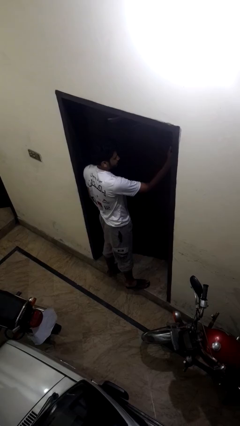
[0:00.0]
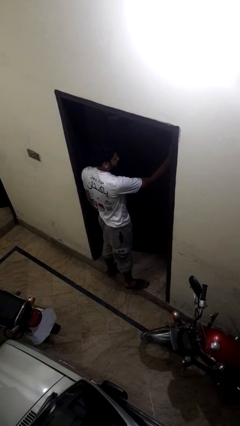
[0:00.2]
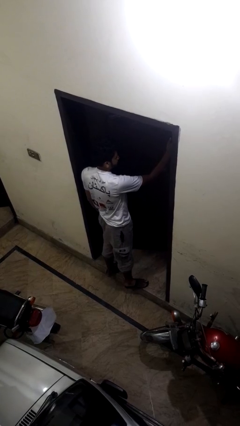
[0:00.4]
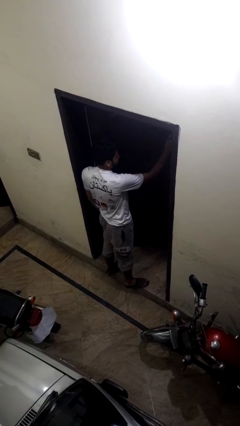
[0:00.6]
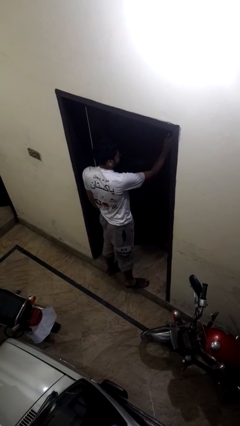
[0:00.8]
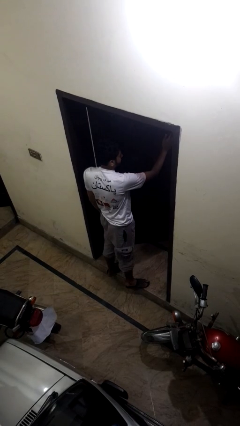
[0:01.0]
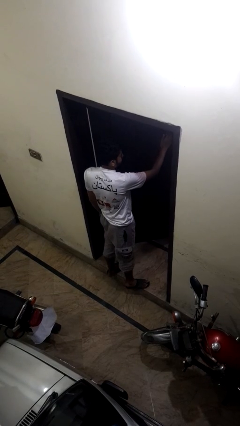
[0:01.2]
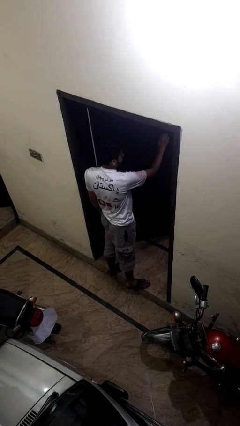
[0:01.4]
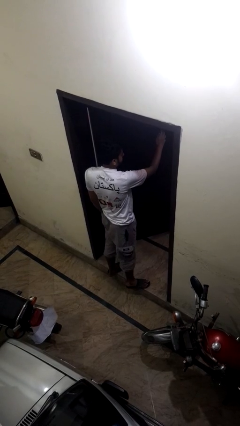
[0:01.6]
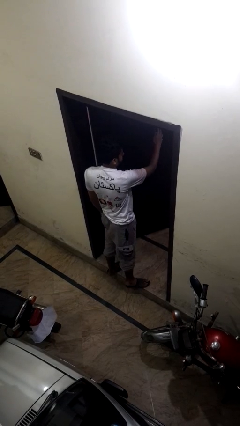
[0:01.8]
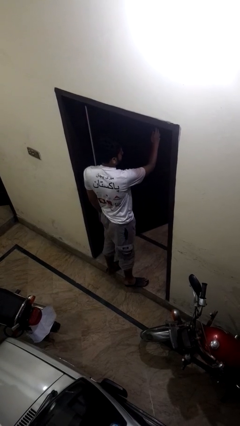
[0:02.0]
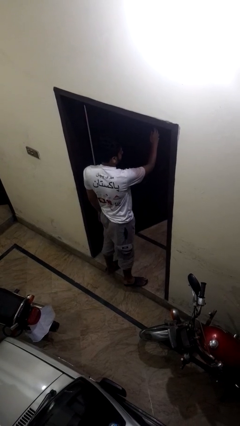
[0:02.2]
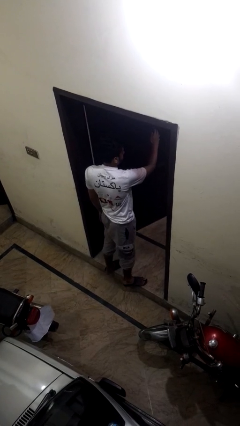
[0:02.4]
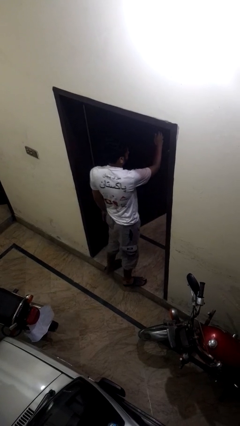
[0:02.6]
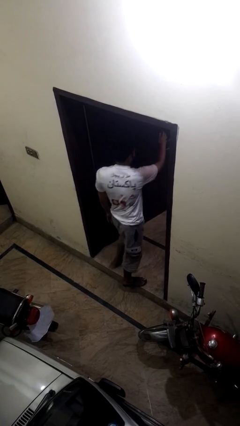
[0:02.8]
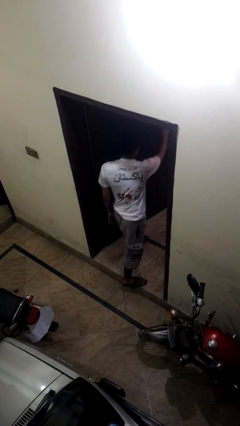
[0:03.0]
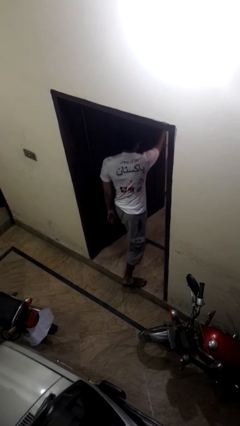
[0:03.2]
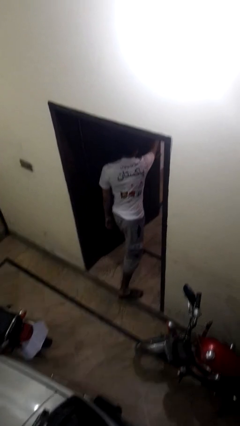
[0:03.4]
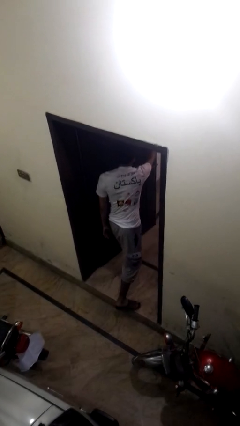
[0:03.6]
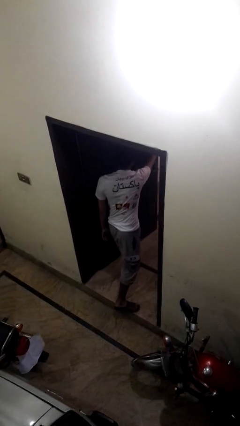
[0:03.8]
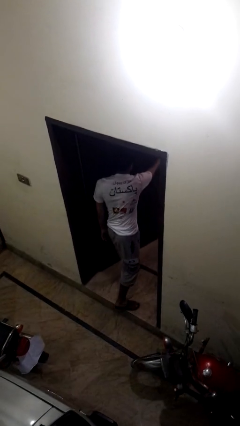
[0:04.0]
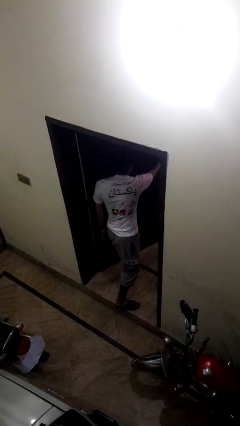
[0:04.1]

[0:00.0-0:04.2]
person opens facility door

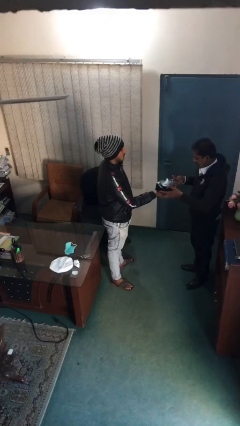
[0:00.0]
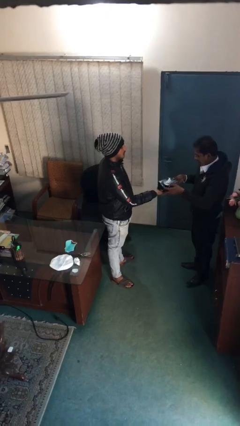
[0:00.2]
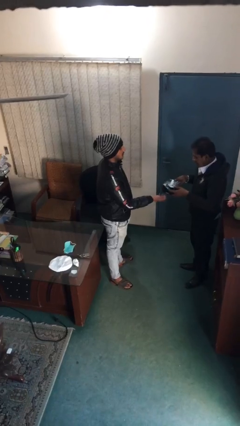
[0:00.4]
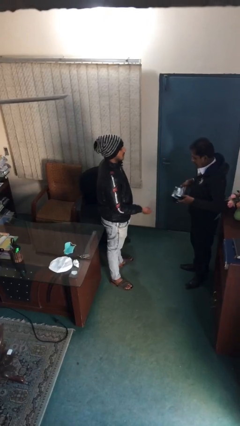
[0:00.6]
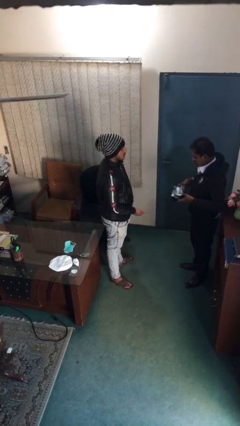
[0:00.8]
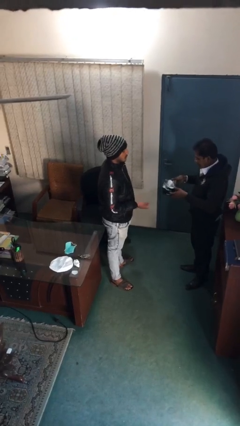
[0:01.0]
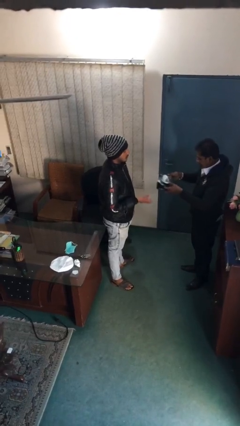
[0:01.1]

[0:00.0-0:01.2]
person transfers object to person

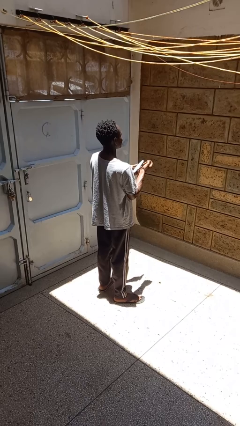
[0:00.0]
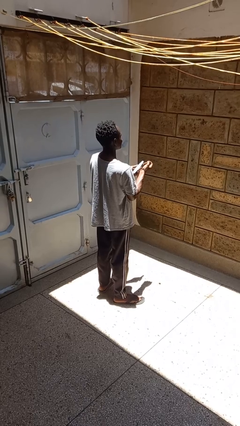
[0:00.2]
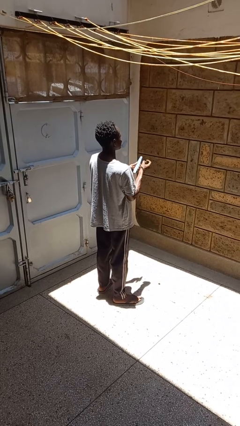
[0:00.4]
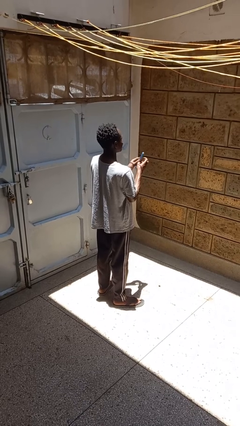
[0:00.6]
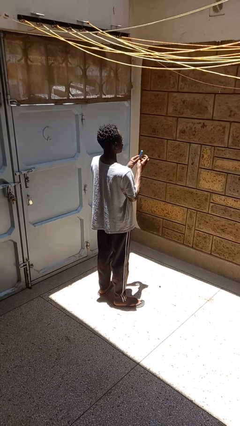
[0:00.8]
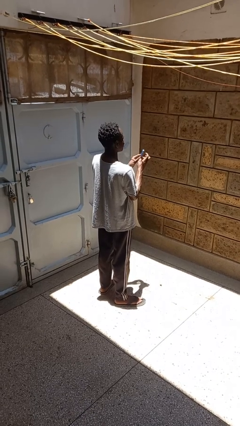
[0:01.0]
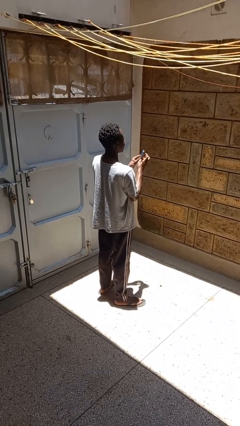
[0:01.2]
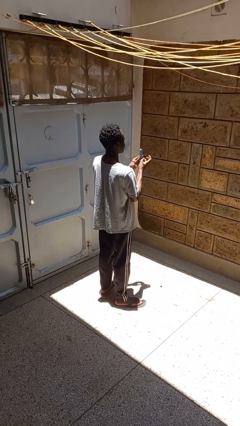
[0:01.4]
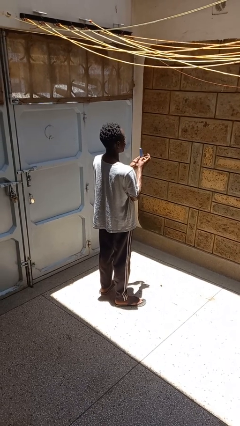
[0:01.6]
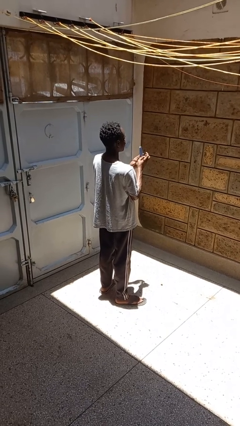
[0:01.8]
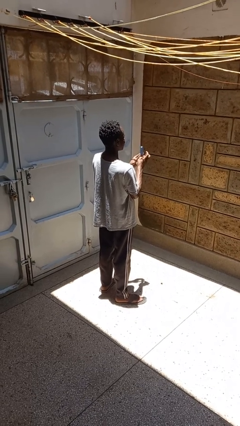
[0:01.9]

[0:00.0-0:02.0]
person files fingernails

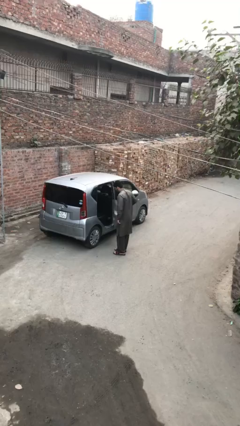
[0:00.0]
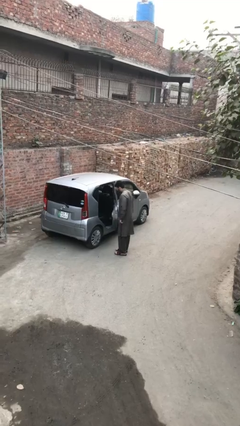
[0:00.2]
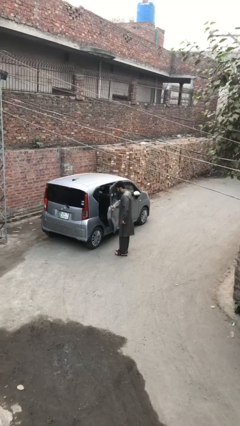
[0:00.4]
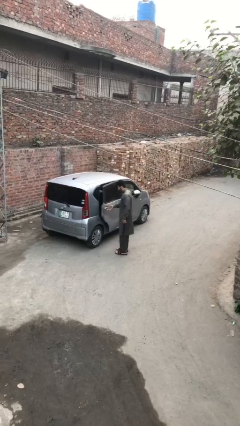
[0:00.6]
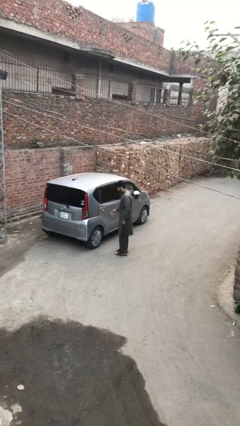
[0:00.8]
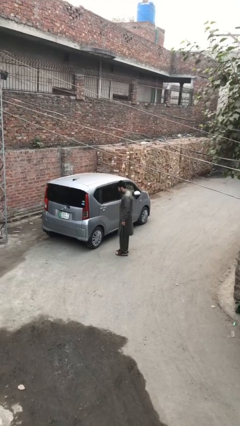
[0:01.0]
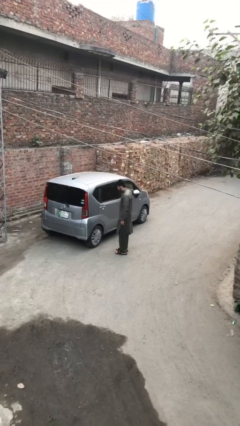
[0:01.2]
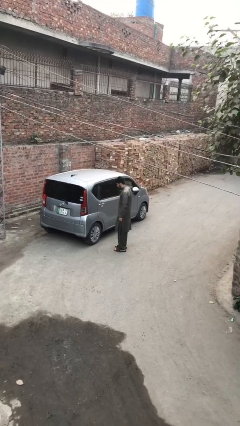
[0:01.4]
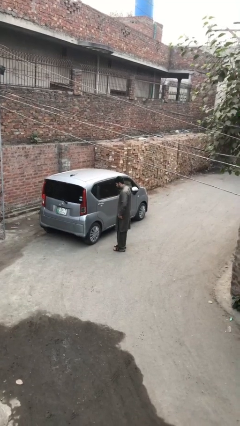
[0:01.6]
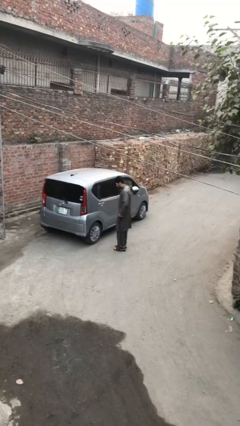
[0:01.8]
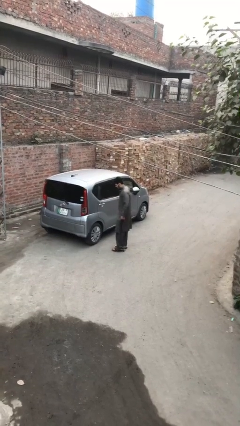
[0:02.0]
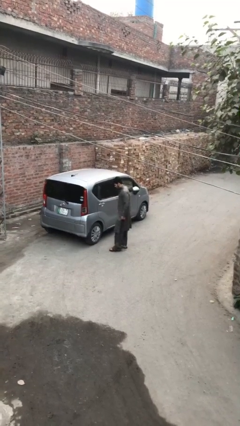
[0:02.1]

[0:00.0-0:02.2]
person closes car door

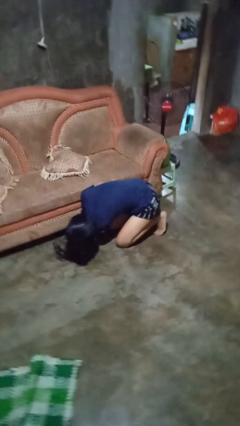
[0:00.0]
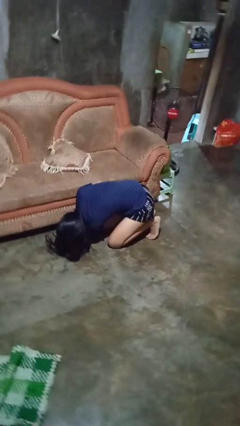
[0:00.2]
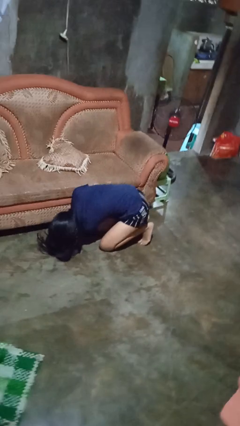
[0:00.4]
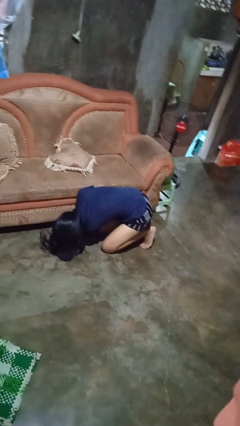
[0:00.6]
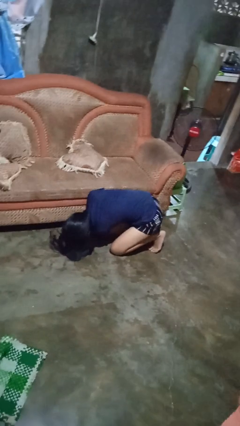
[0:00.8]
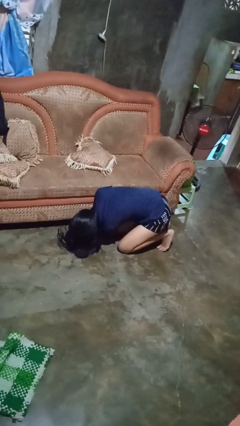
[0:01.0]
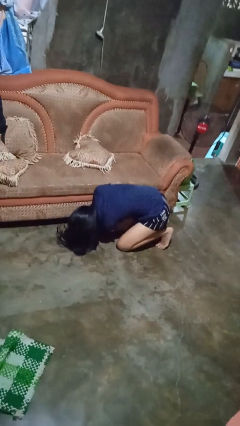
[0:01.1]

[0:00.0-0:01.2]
person searches under couch

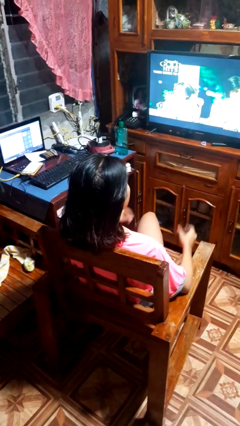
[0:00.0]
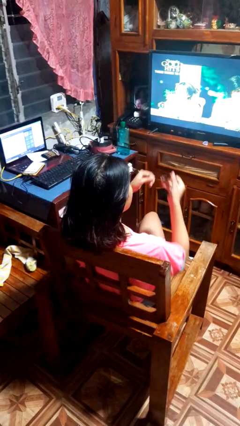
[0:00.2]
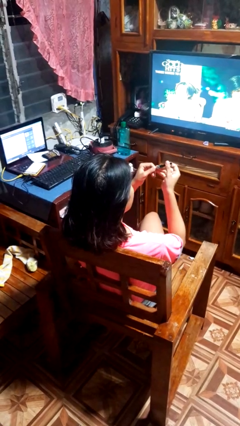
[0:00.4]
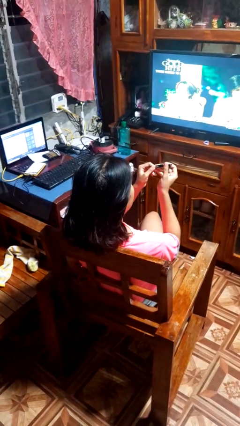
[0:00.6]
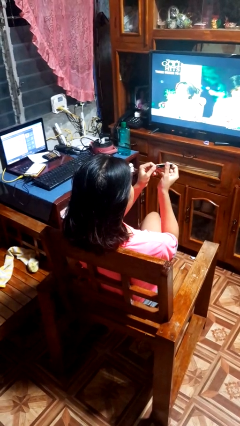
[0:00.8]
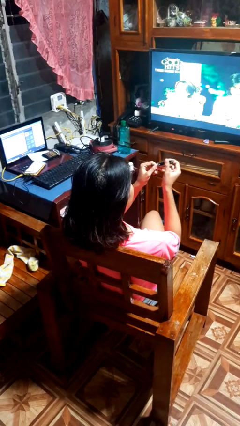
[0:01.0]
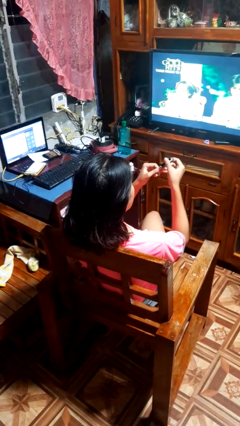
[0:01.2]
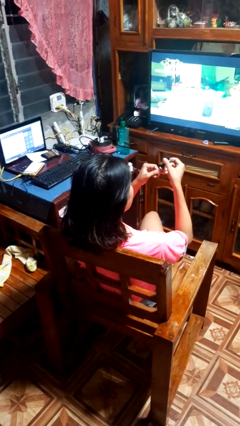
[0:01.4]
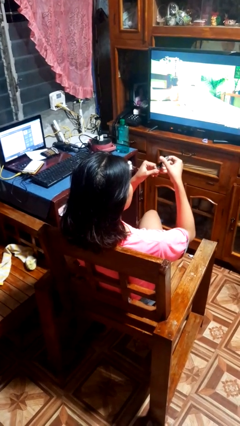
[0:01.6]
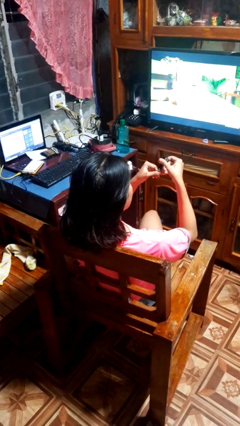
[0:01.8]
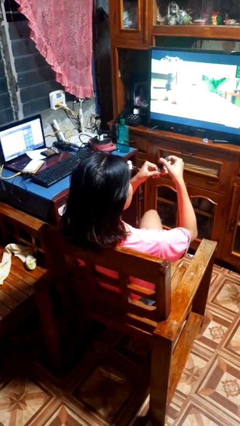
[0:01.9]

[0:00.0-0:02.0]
person clips fingernails

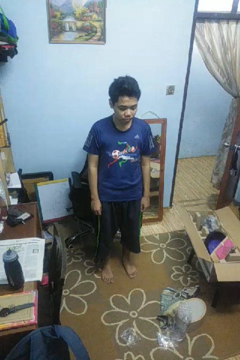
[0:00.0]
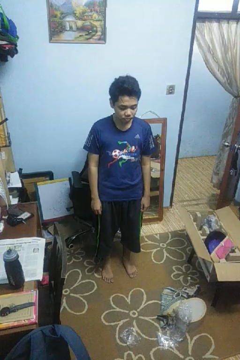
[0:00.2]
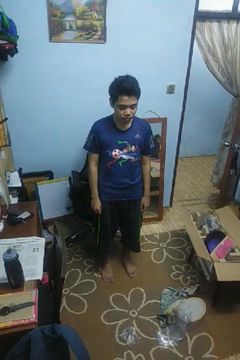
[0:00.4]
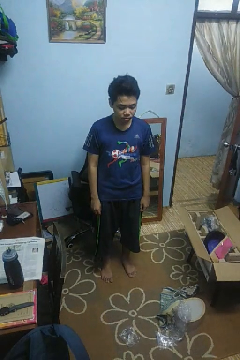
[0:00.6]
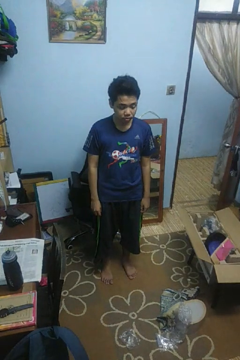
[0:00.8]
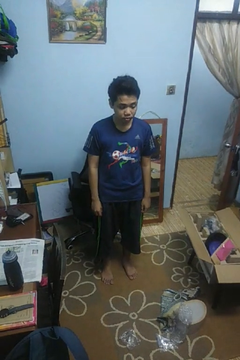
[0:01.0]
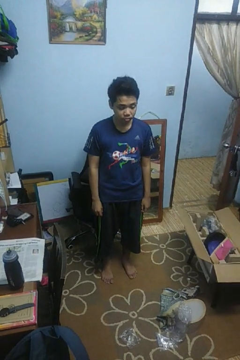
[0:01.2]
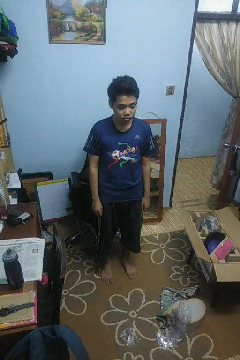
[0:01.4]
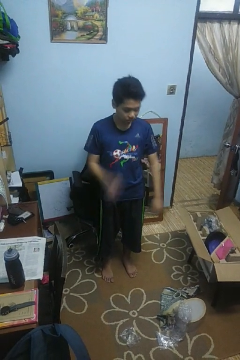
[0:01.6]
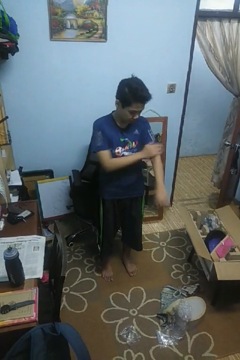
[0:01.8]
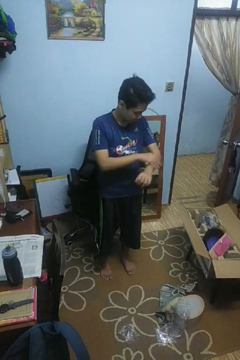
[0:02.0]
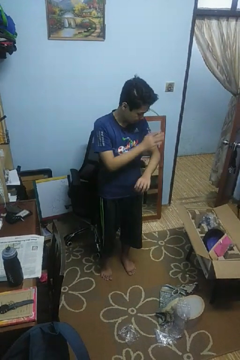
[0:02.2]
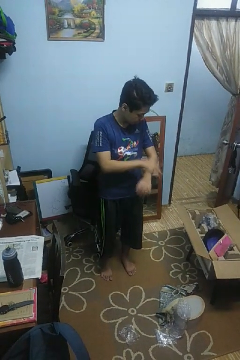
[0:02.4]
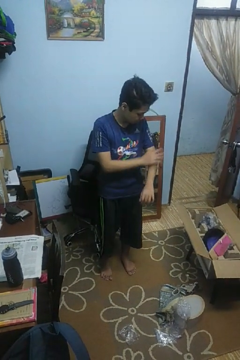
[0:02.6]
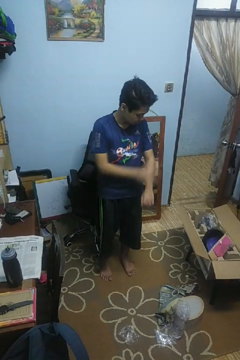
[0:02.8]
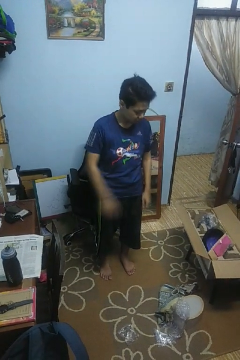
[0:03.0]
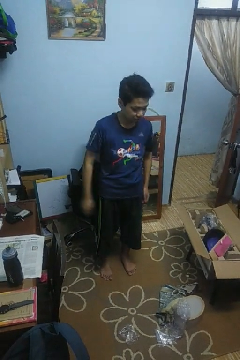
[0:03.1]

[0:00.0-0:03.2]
person swats bug

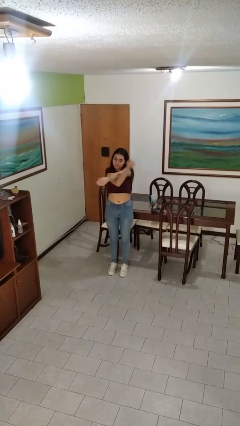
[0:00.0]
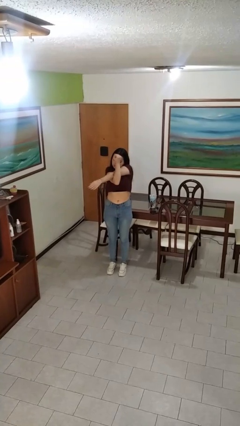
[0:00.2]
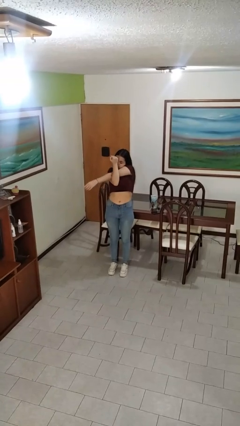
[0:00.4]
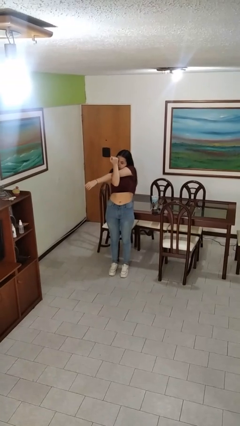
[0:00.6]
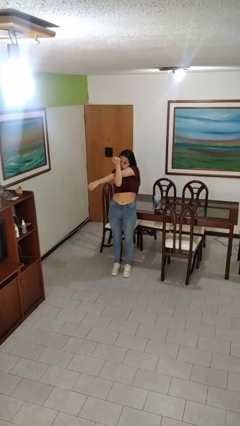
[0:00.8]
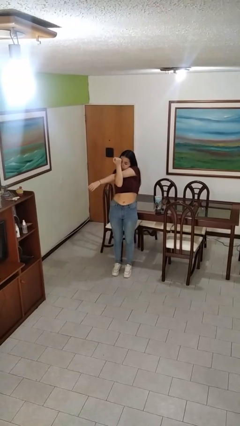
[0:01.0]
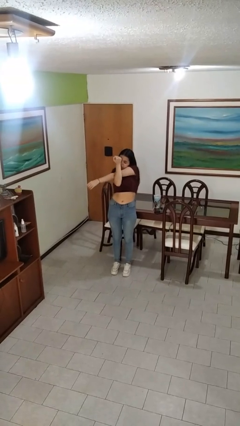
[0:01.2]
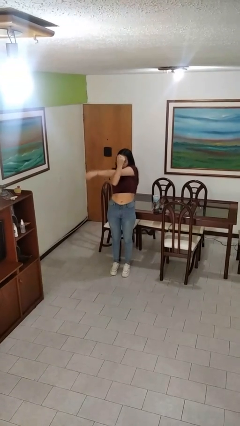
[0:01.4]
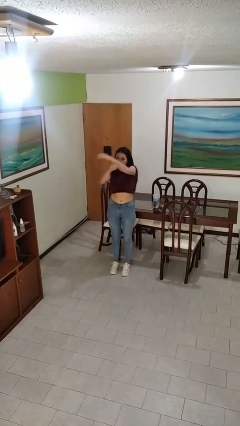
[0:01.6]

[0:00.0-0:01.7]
person stretches arms to side
